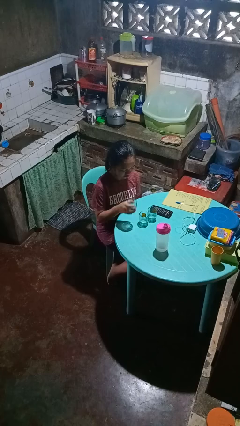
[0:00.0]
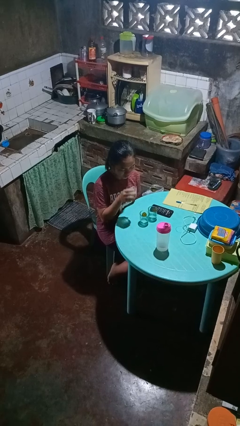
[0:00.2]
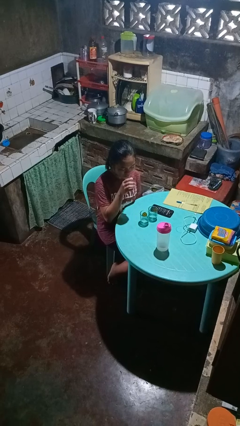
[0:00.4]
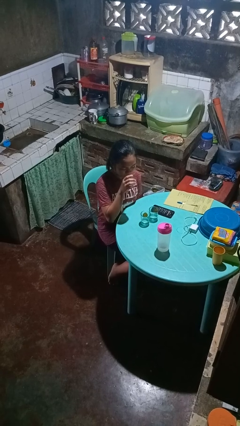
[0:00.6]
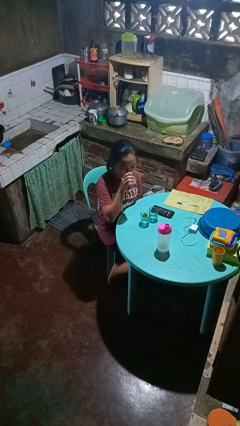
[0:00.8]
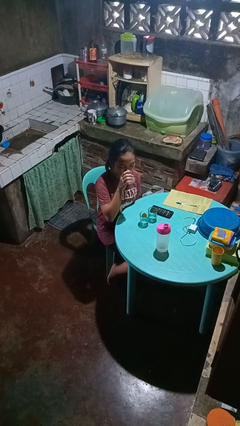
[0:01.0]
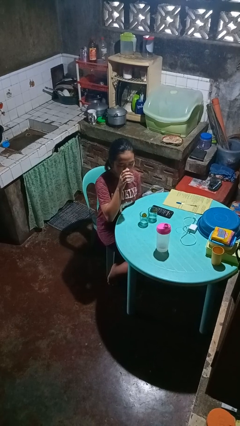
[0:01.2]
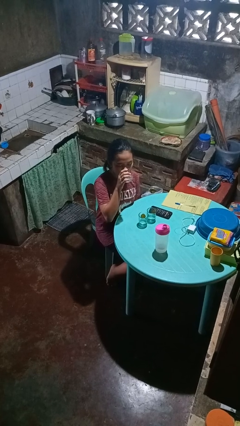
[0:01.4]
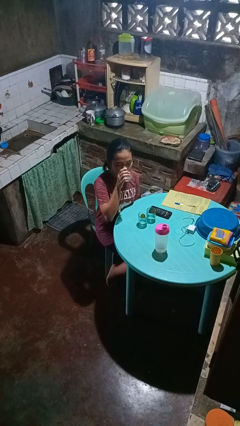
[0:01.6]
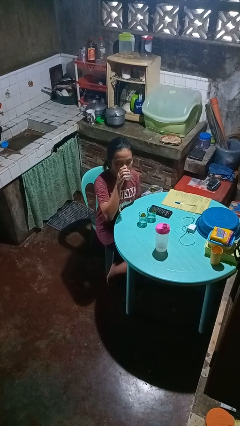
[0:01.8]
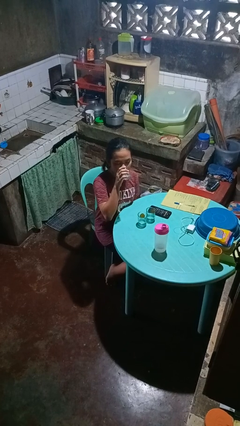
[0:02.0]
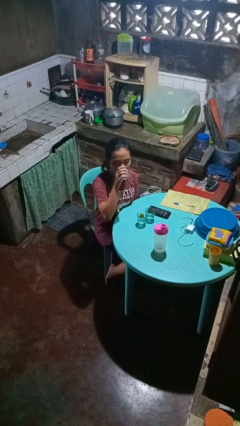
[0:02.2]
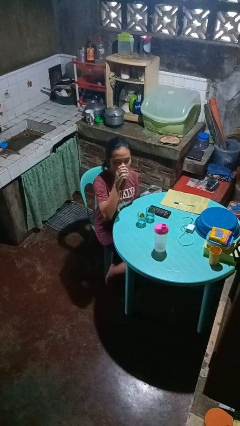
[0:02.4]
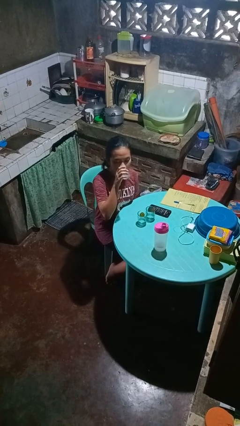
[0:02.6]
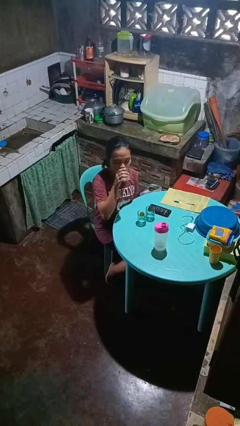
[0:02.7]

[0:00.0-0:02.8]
person drinks from shotglass

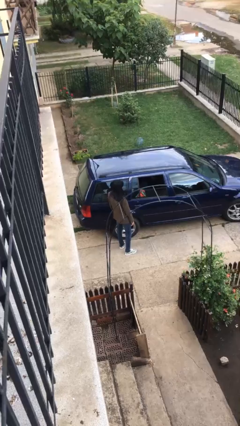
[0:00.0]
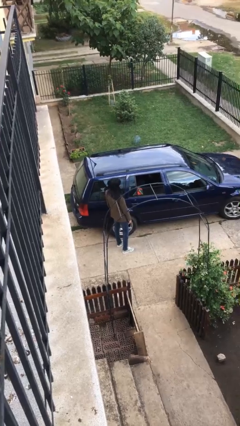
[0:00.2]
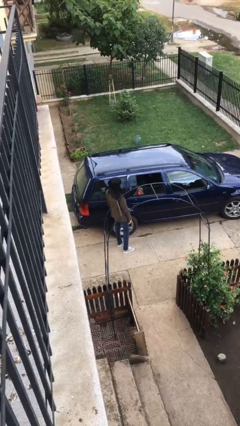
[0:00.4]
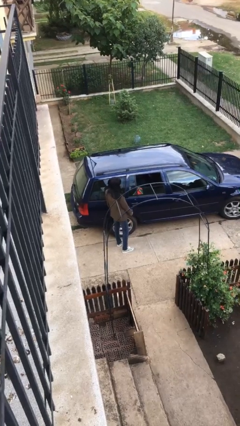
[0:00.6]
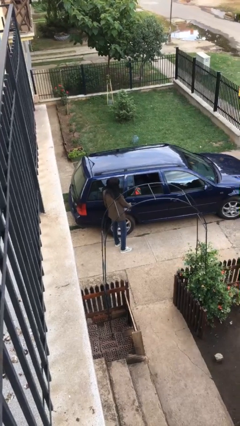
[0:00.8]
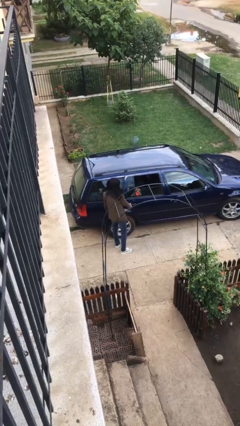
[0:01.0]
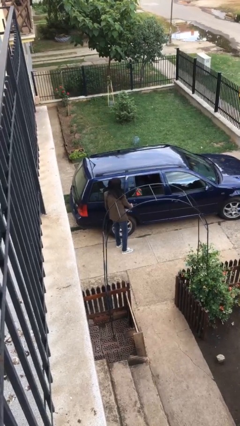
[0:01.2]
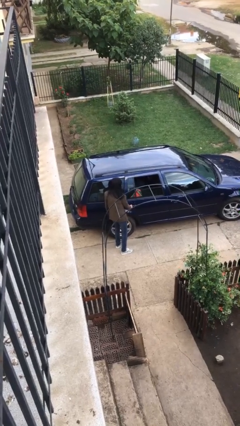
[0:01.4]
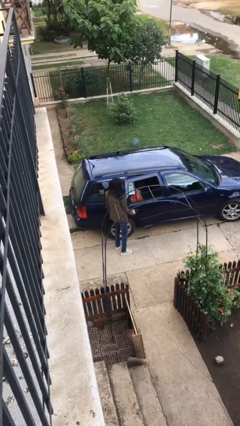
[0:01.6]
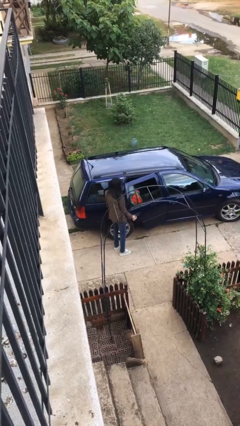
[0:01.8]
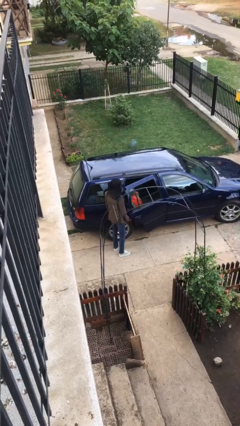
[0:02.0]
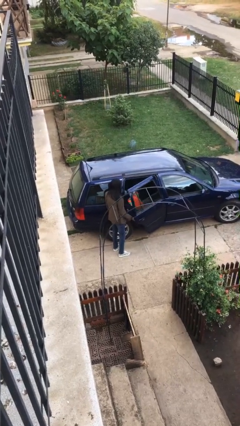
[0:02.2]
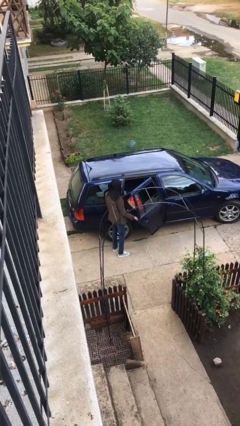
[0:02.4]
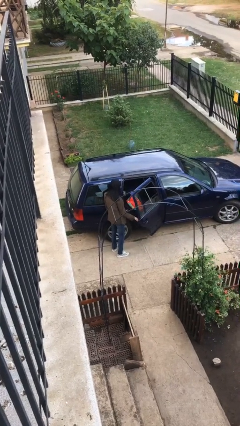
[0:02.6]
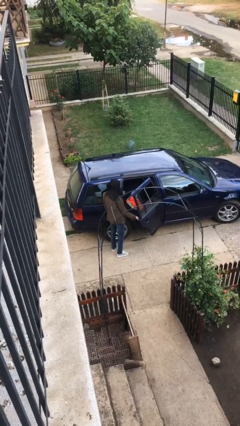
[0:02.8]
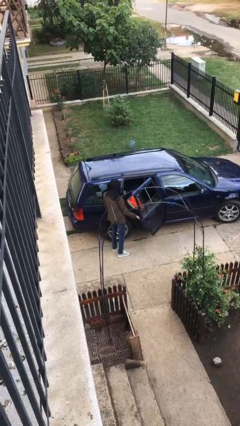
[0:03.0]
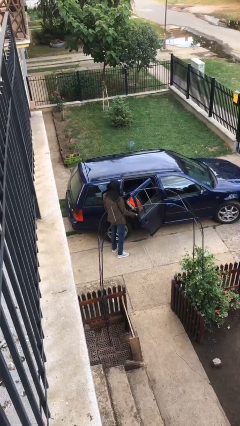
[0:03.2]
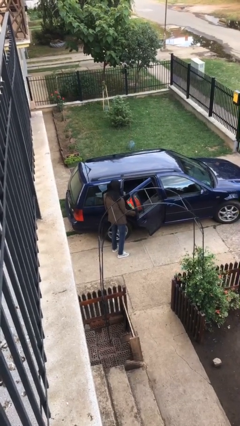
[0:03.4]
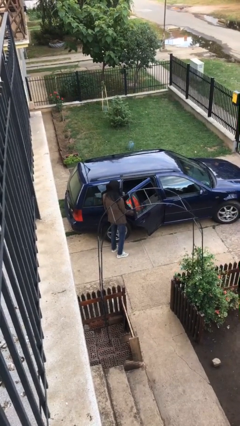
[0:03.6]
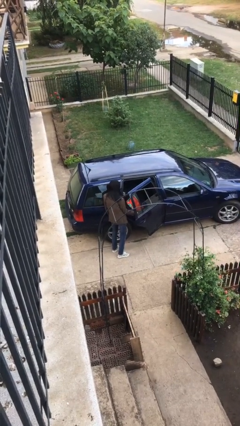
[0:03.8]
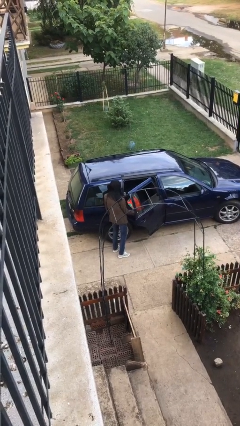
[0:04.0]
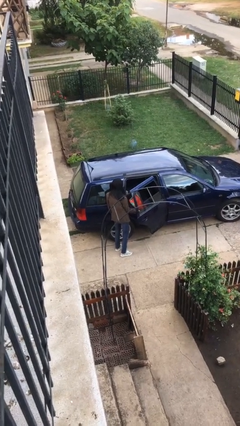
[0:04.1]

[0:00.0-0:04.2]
person opens car door

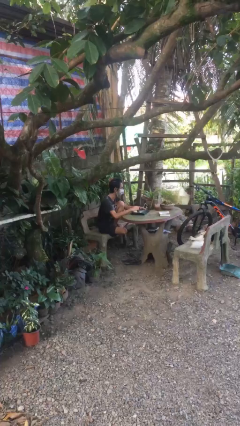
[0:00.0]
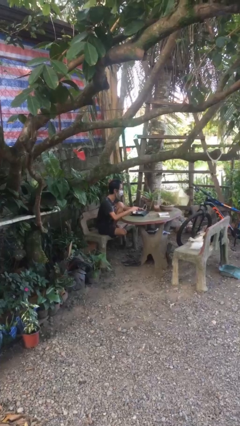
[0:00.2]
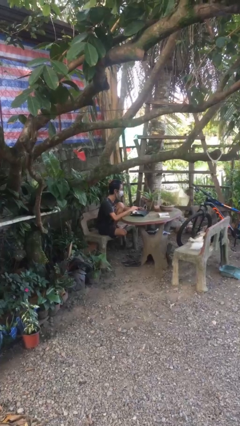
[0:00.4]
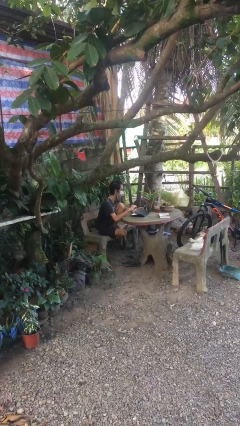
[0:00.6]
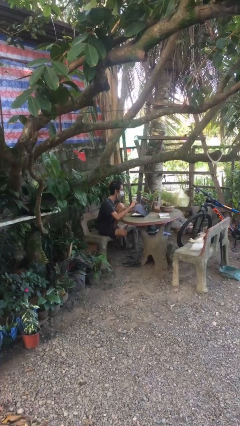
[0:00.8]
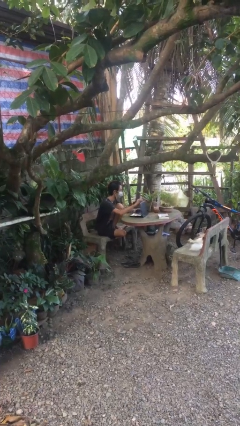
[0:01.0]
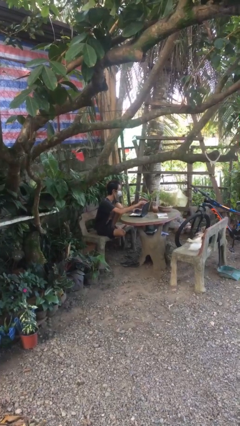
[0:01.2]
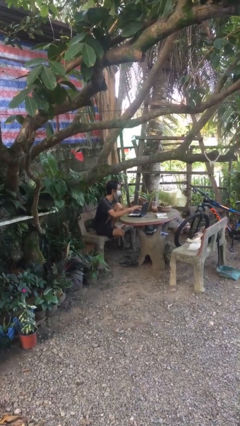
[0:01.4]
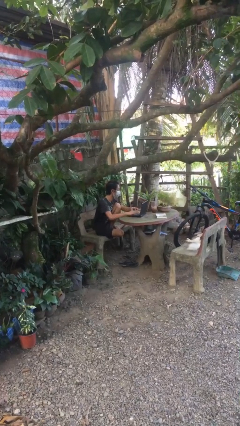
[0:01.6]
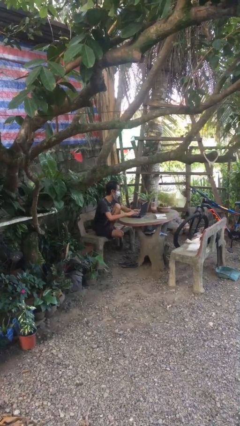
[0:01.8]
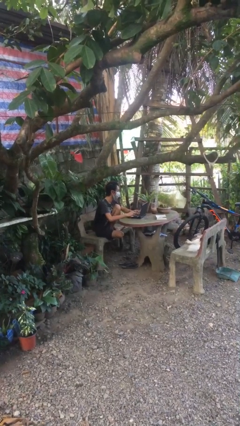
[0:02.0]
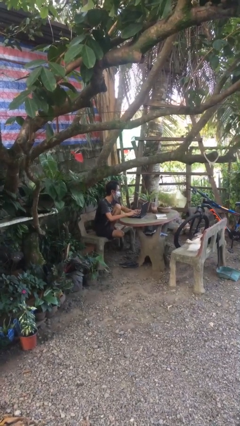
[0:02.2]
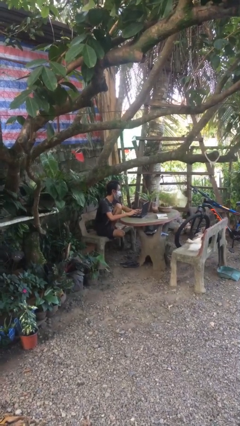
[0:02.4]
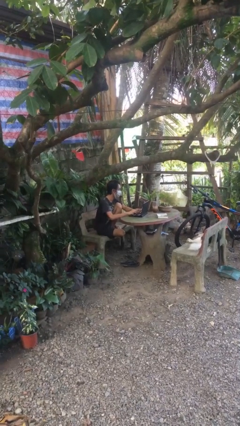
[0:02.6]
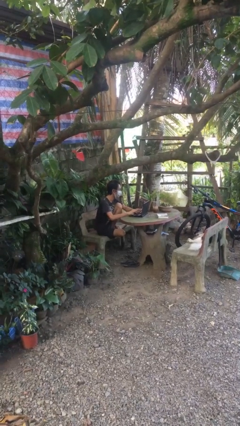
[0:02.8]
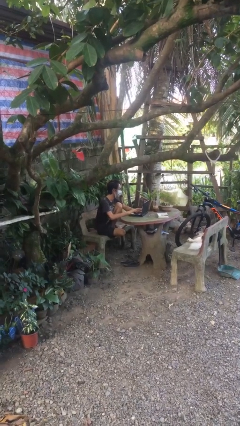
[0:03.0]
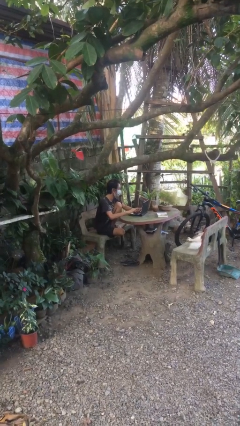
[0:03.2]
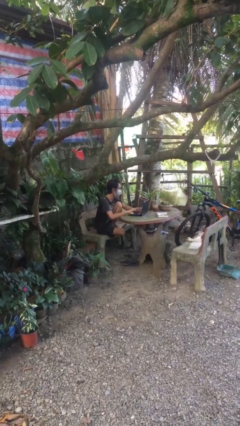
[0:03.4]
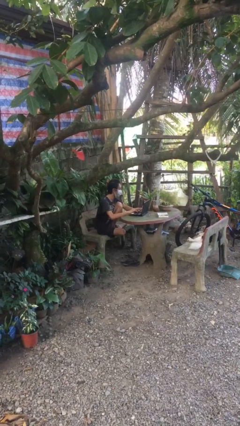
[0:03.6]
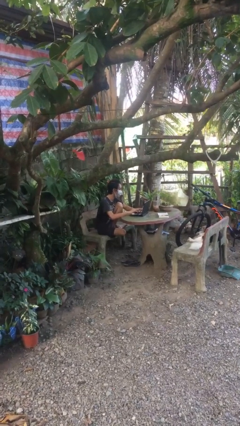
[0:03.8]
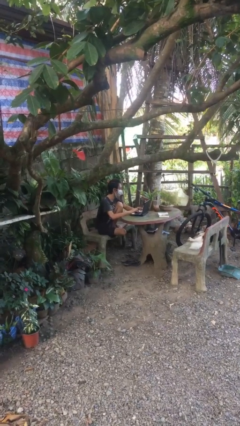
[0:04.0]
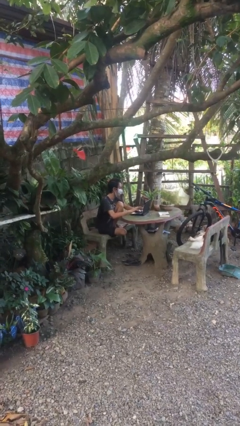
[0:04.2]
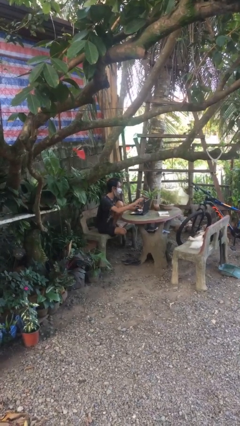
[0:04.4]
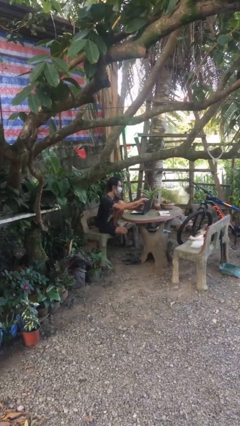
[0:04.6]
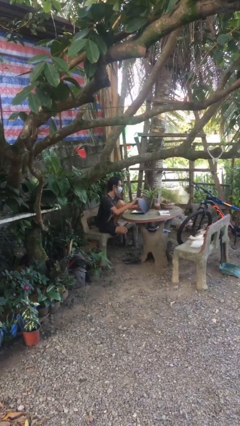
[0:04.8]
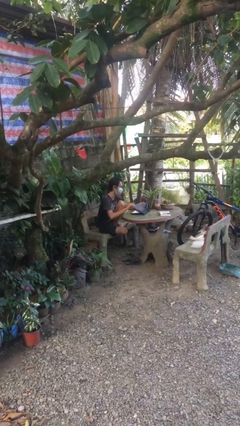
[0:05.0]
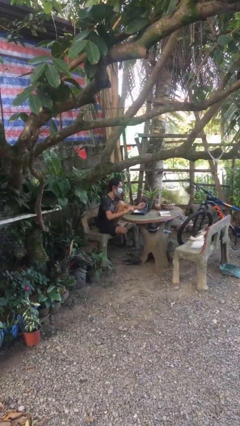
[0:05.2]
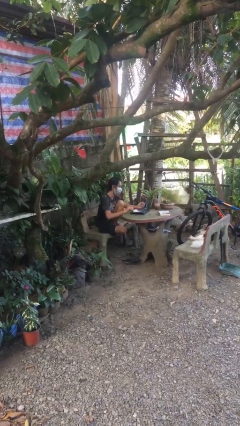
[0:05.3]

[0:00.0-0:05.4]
person interacts with laptop

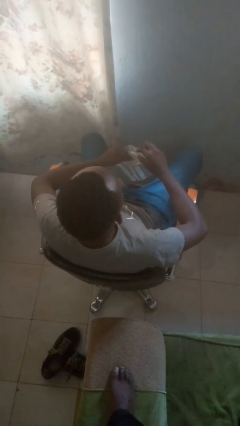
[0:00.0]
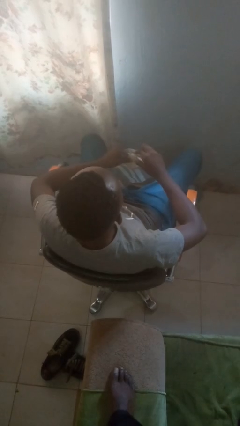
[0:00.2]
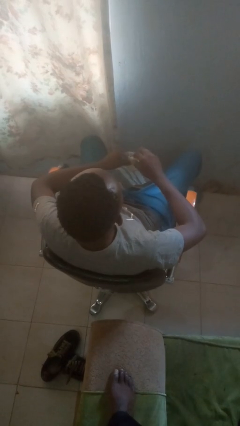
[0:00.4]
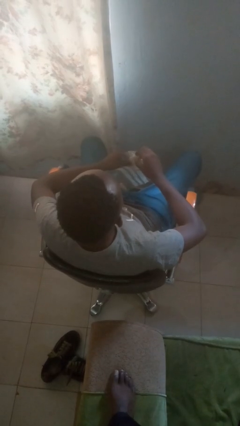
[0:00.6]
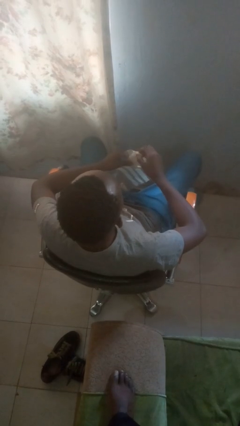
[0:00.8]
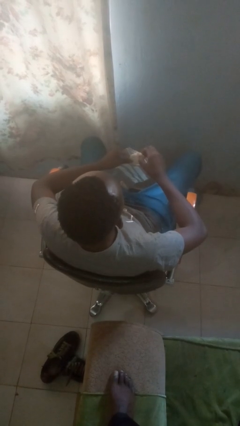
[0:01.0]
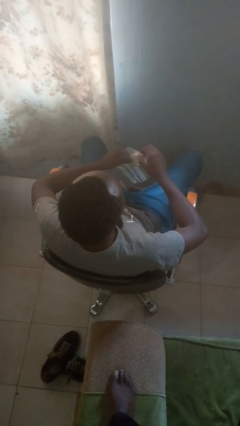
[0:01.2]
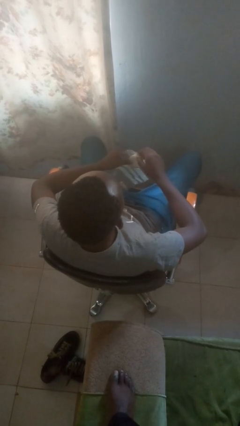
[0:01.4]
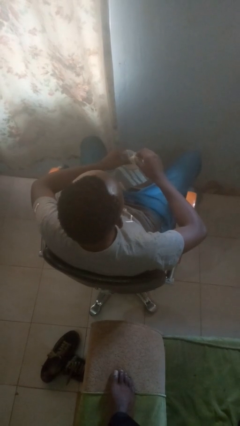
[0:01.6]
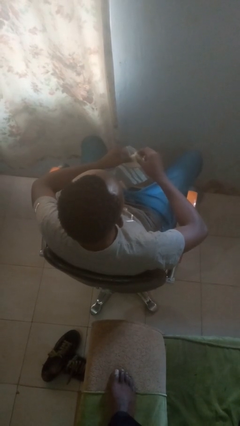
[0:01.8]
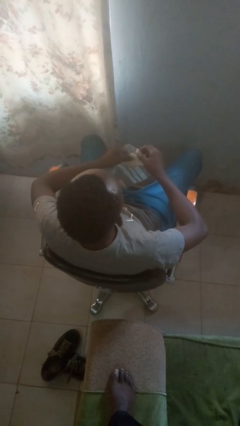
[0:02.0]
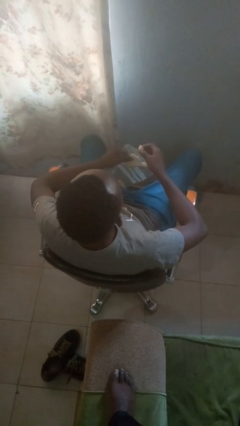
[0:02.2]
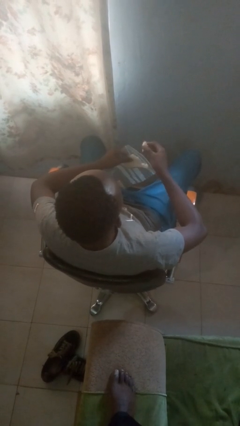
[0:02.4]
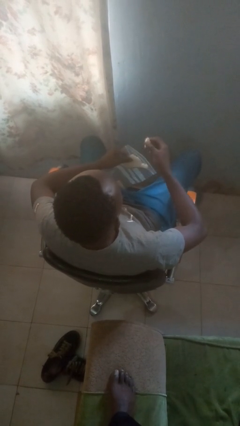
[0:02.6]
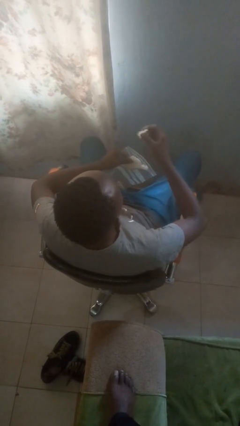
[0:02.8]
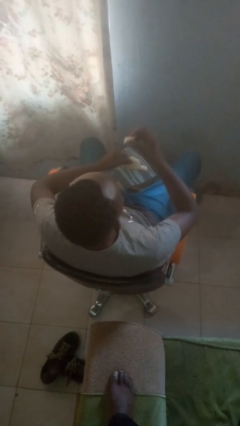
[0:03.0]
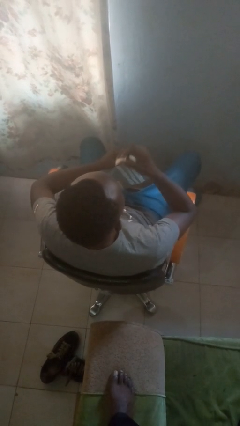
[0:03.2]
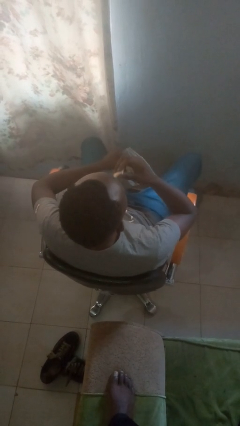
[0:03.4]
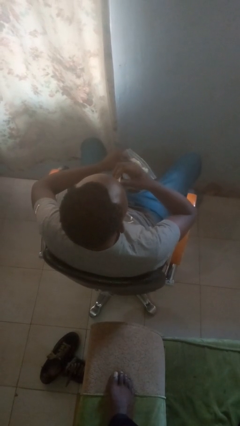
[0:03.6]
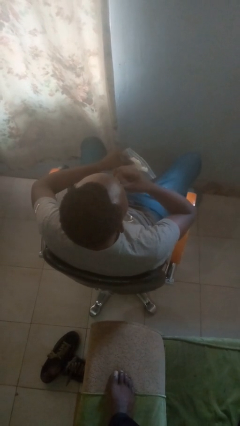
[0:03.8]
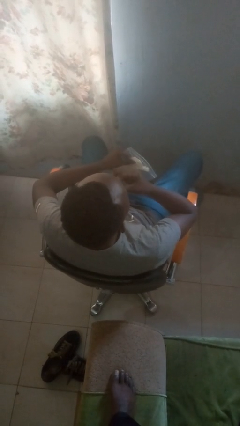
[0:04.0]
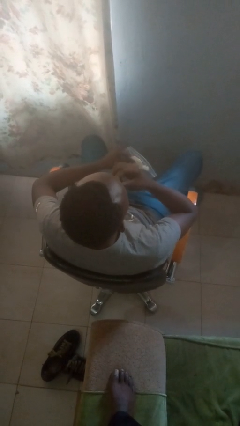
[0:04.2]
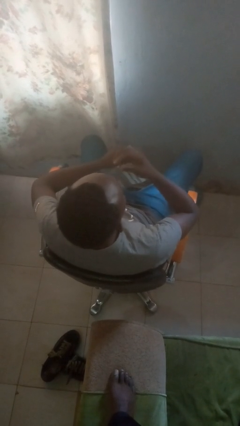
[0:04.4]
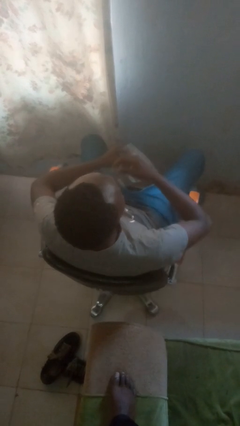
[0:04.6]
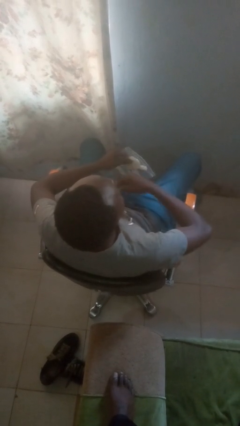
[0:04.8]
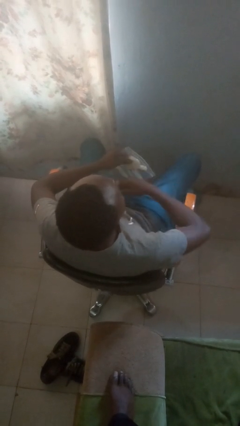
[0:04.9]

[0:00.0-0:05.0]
person eats snack from bag

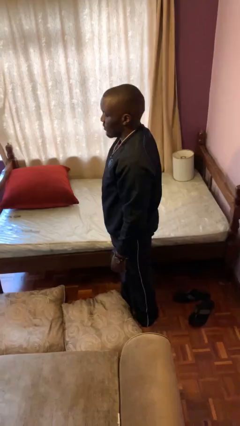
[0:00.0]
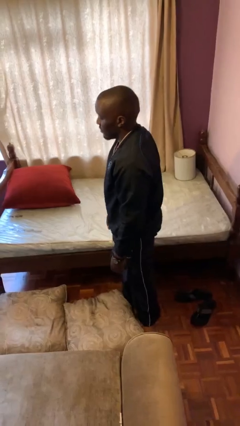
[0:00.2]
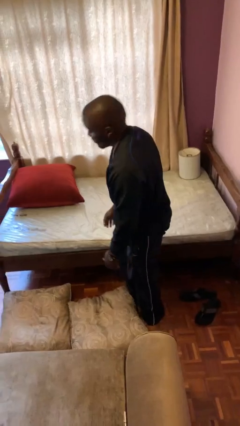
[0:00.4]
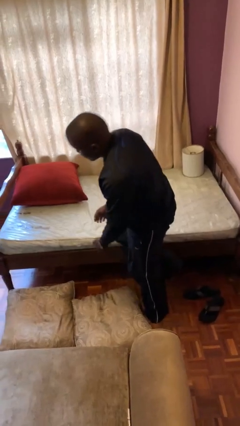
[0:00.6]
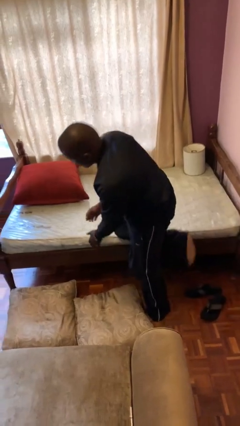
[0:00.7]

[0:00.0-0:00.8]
person lies down on bed
